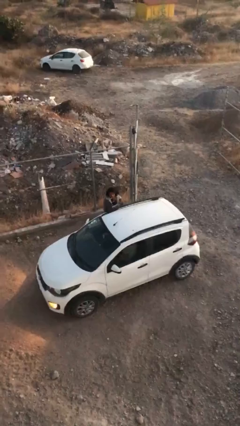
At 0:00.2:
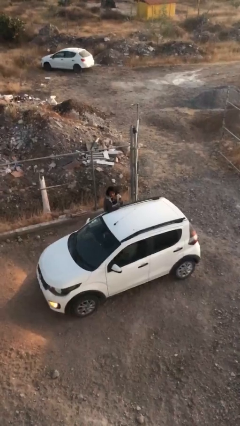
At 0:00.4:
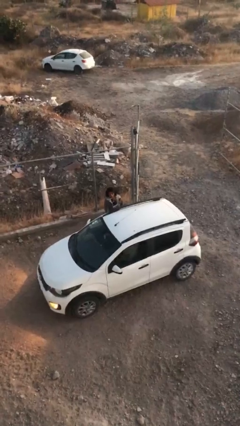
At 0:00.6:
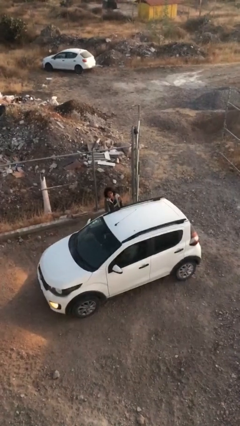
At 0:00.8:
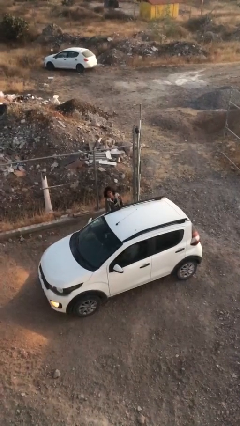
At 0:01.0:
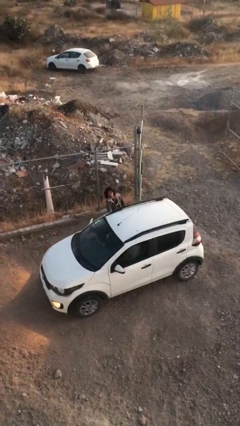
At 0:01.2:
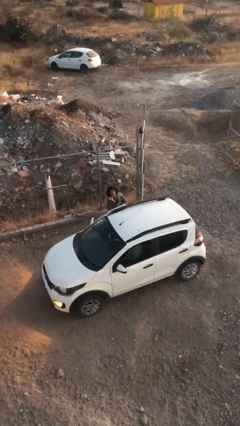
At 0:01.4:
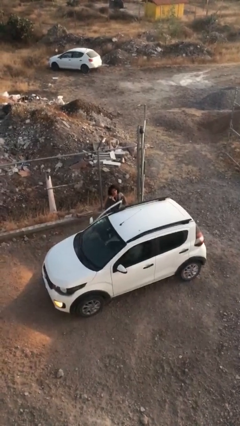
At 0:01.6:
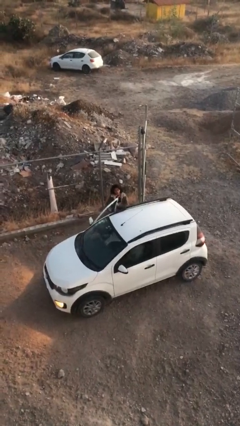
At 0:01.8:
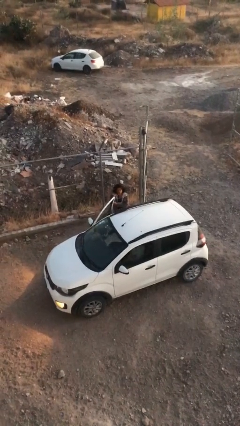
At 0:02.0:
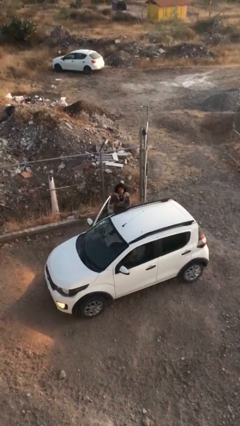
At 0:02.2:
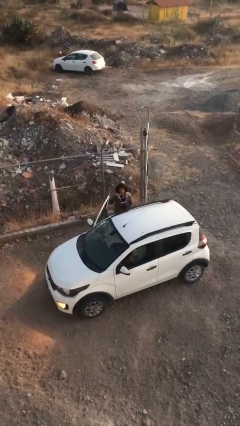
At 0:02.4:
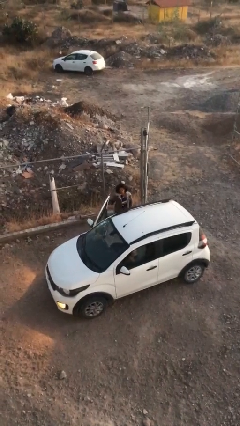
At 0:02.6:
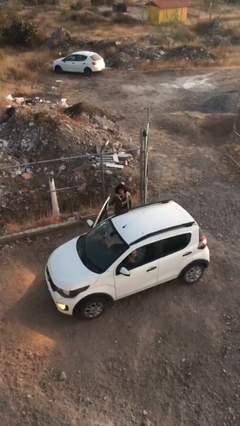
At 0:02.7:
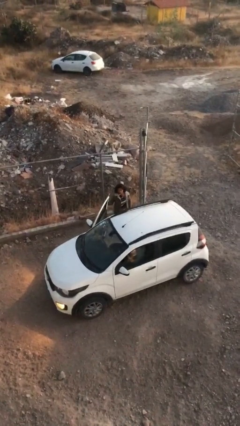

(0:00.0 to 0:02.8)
person opens car door

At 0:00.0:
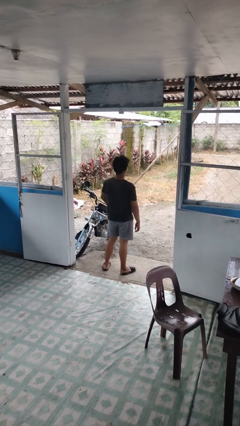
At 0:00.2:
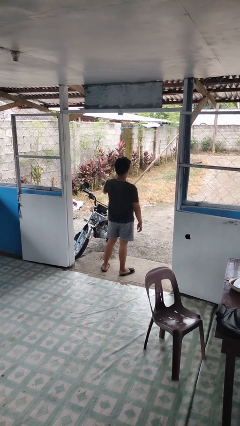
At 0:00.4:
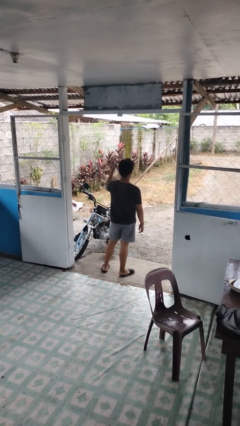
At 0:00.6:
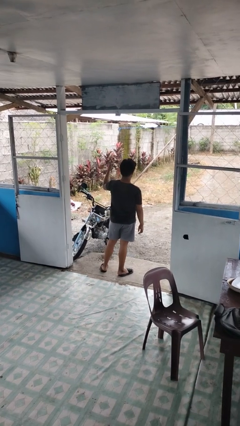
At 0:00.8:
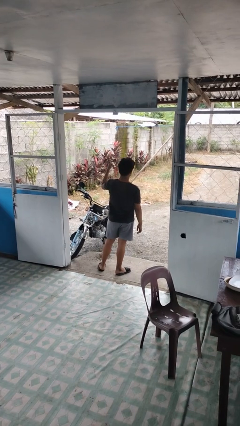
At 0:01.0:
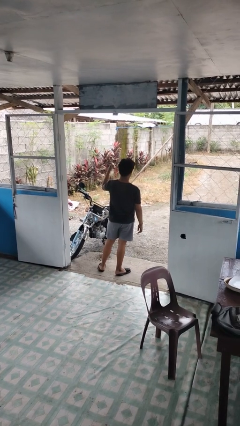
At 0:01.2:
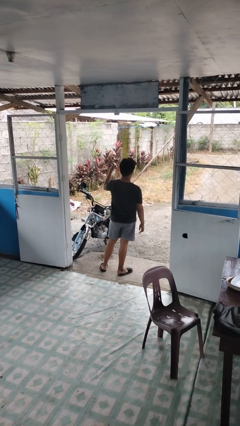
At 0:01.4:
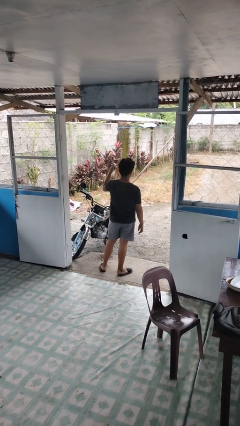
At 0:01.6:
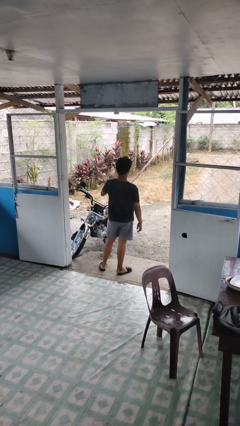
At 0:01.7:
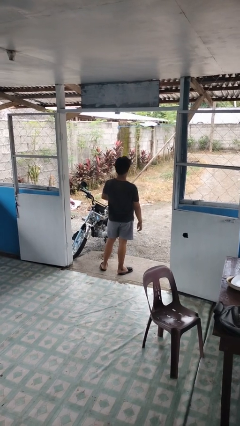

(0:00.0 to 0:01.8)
person gestures thumbs up

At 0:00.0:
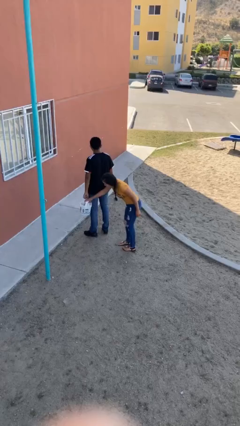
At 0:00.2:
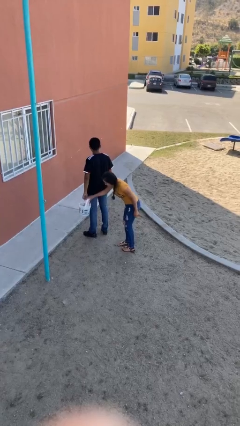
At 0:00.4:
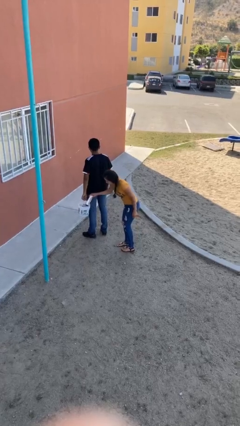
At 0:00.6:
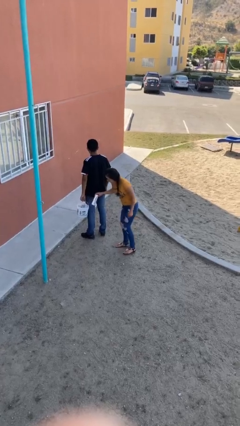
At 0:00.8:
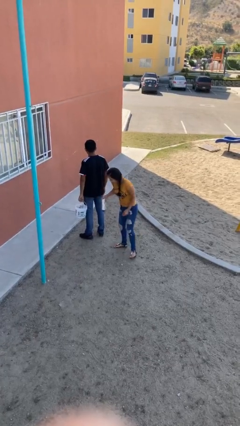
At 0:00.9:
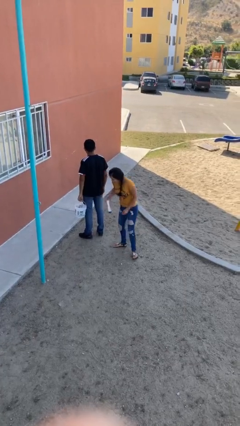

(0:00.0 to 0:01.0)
person steals object from person

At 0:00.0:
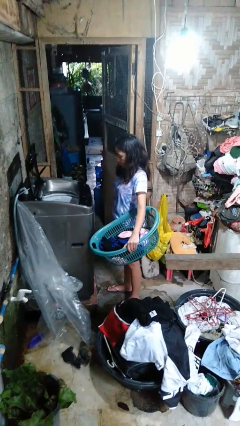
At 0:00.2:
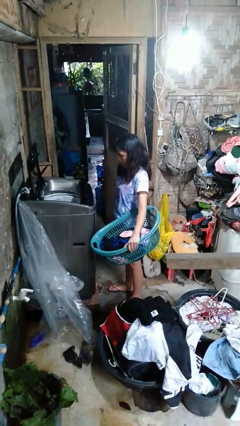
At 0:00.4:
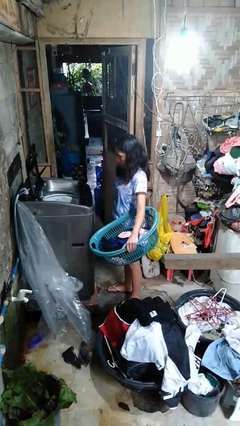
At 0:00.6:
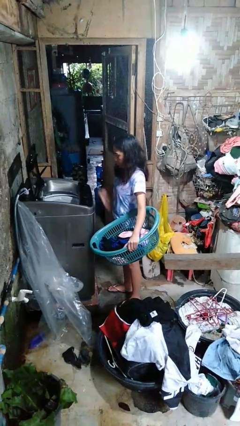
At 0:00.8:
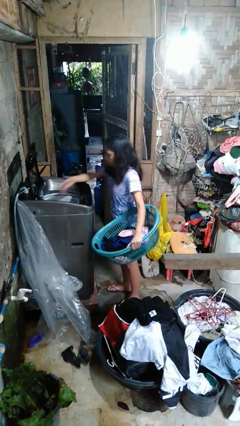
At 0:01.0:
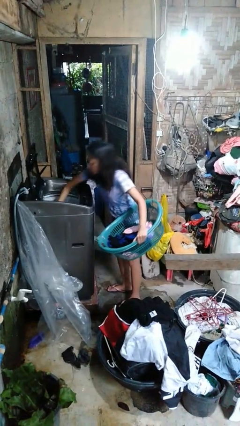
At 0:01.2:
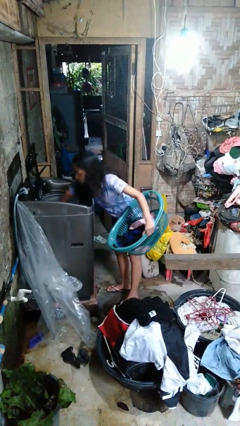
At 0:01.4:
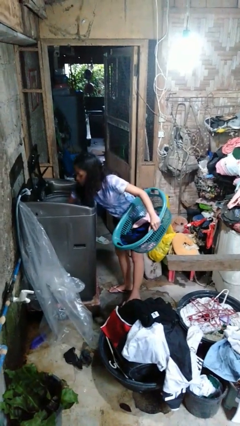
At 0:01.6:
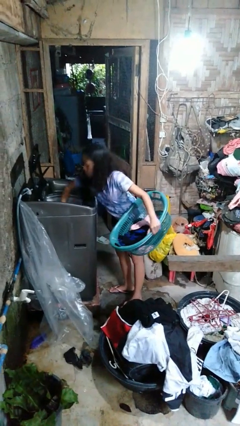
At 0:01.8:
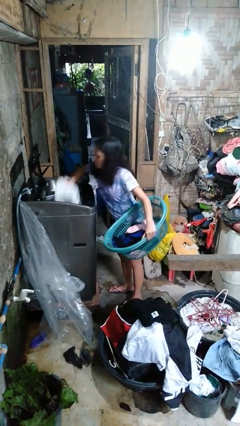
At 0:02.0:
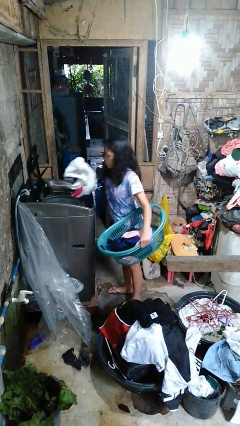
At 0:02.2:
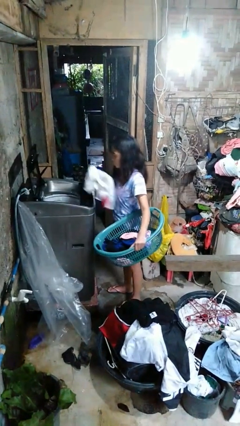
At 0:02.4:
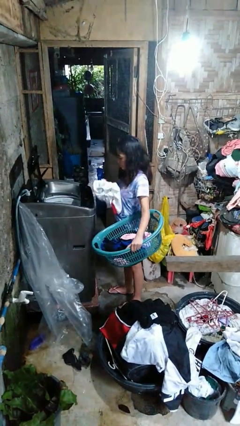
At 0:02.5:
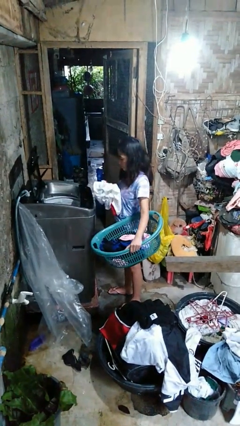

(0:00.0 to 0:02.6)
person unloads clotheswasher

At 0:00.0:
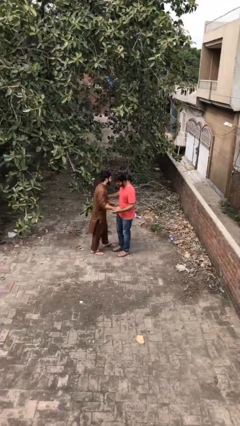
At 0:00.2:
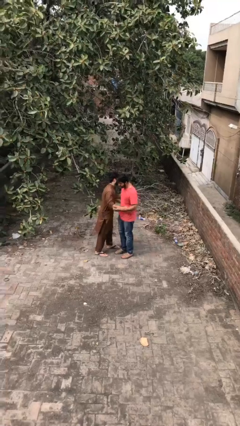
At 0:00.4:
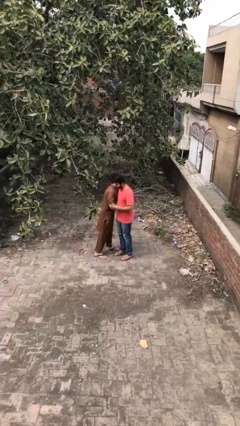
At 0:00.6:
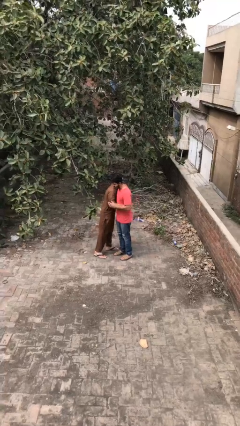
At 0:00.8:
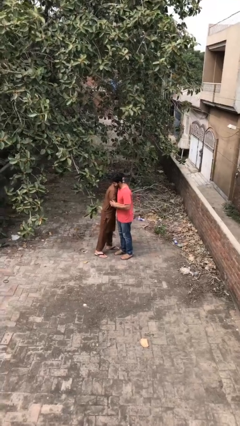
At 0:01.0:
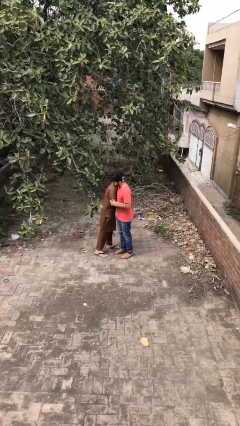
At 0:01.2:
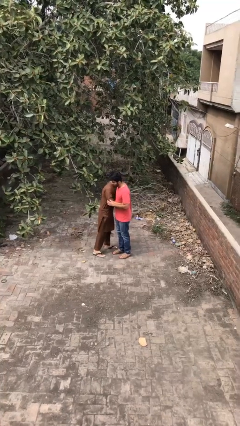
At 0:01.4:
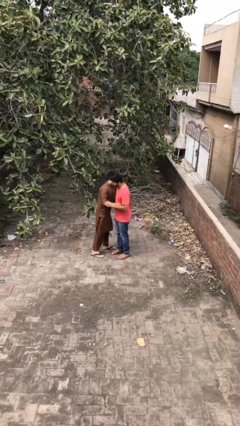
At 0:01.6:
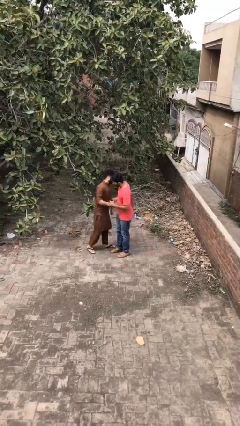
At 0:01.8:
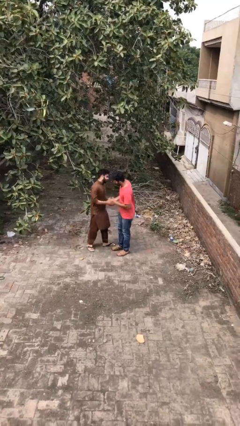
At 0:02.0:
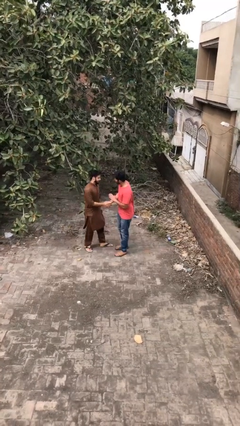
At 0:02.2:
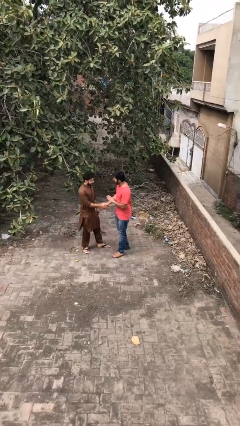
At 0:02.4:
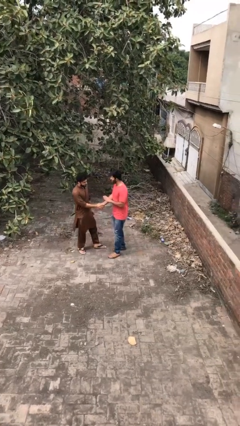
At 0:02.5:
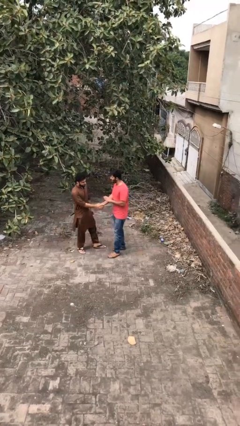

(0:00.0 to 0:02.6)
person embraces person

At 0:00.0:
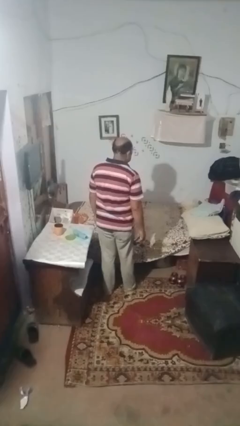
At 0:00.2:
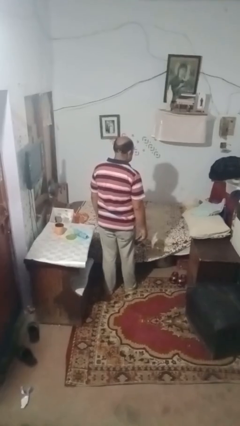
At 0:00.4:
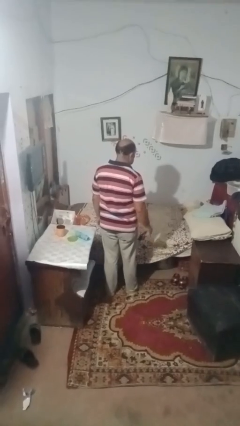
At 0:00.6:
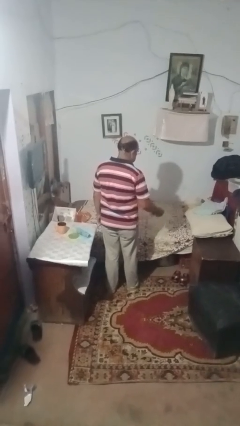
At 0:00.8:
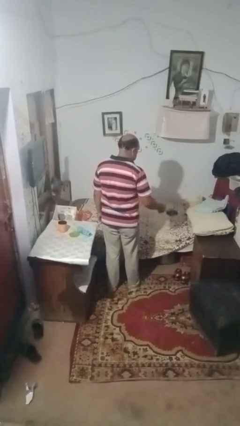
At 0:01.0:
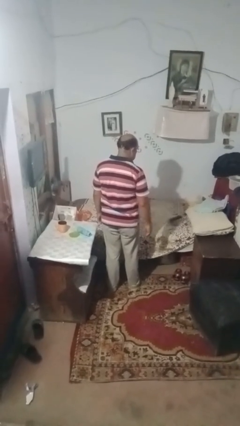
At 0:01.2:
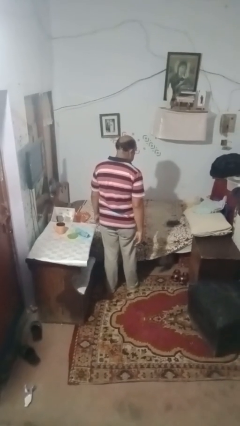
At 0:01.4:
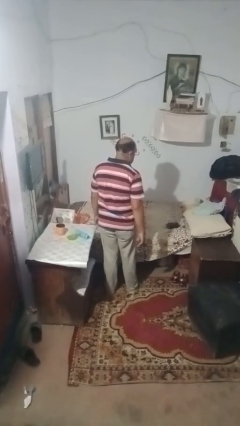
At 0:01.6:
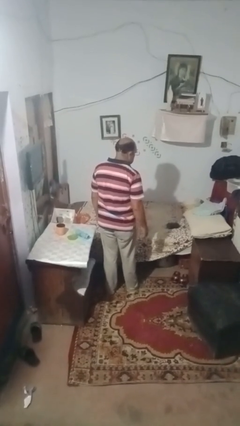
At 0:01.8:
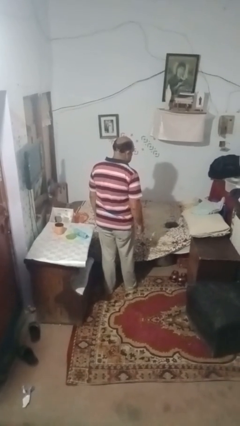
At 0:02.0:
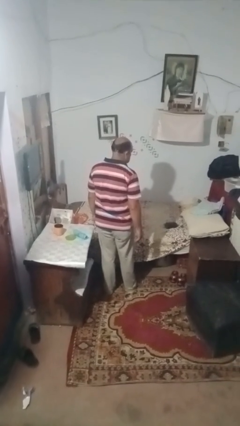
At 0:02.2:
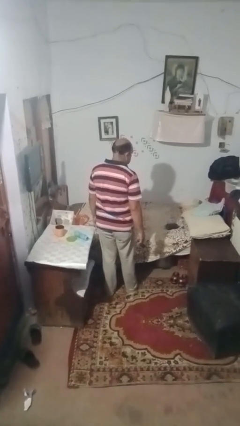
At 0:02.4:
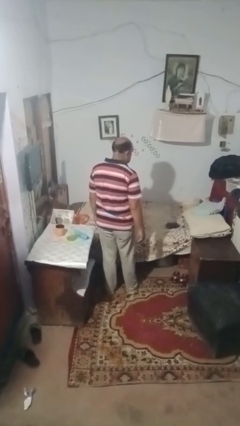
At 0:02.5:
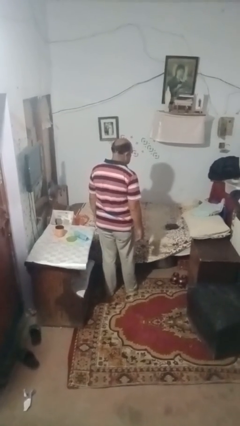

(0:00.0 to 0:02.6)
person throws object on bed

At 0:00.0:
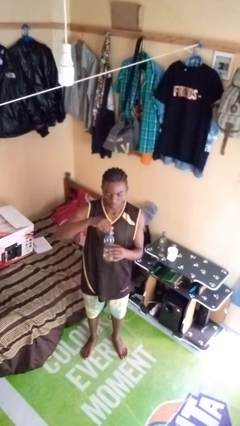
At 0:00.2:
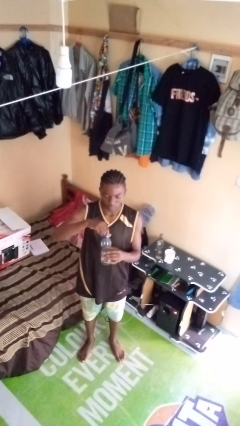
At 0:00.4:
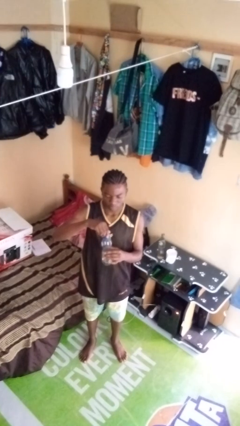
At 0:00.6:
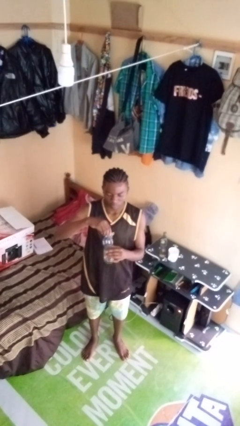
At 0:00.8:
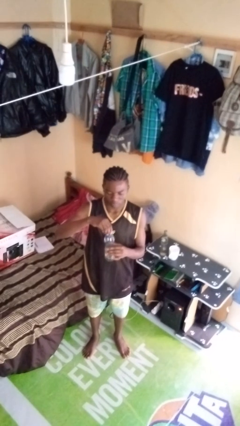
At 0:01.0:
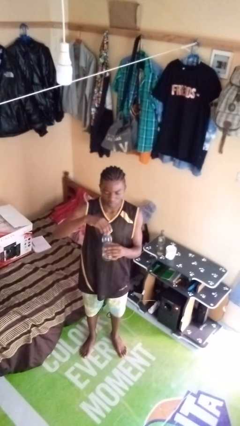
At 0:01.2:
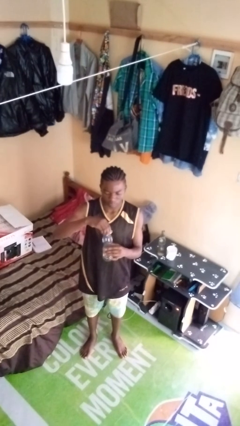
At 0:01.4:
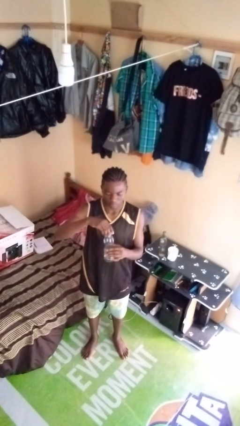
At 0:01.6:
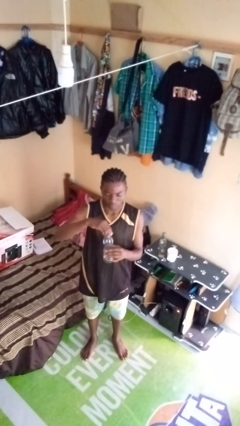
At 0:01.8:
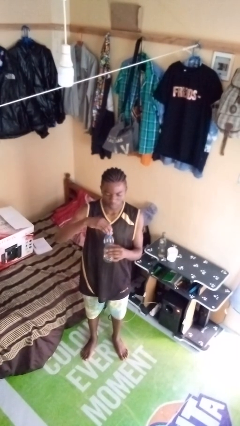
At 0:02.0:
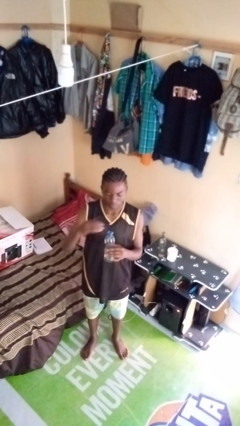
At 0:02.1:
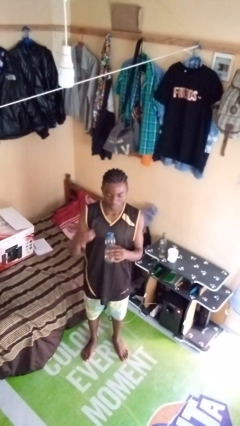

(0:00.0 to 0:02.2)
person unscrews lid from bottle

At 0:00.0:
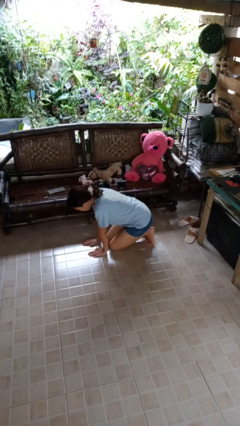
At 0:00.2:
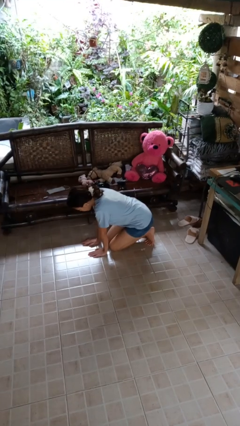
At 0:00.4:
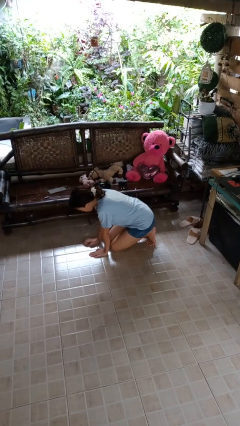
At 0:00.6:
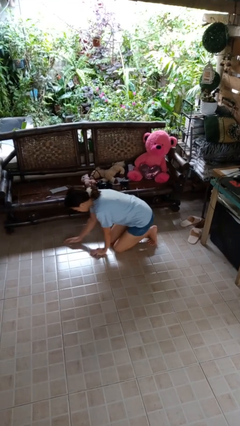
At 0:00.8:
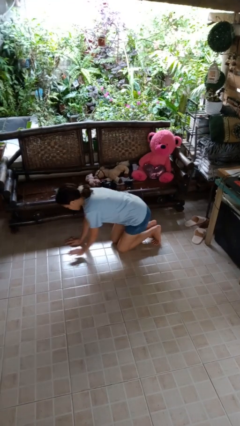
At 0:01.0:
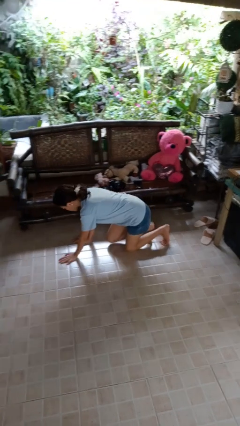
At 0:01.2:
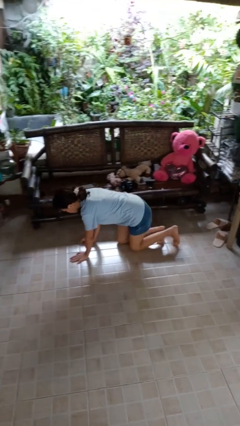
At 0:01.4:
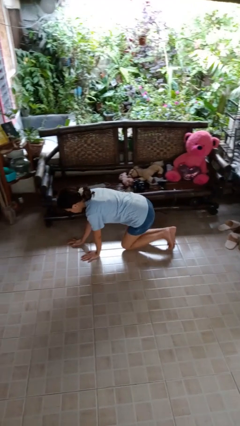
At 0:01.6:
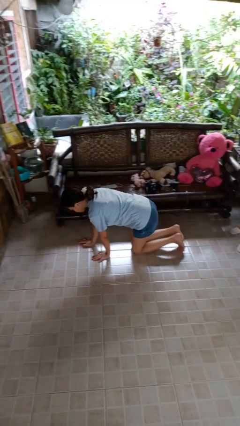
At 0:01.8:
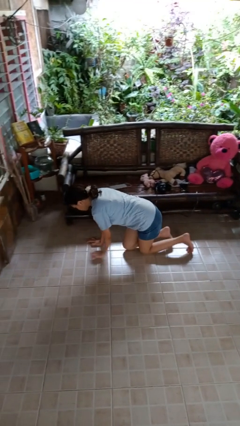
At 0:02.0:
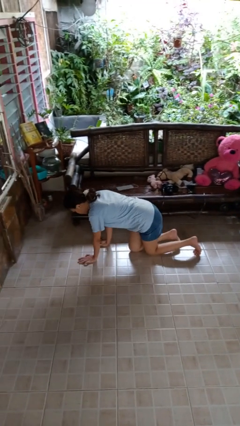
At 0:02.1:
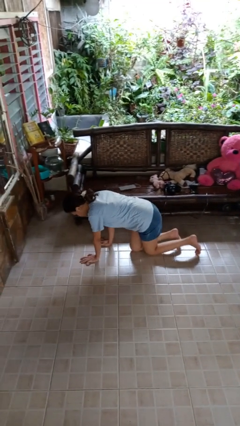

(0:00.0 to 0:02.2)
person crawls
